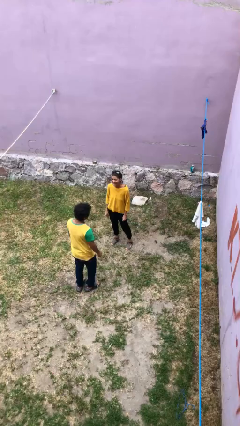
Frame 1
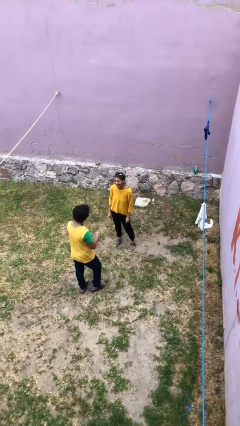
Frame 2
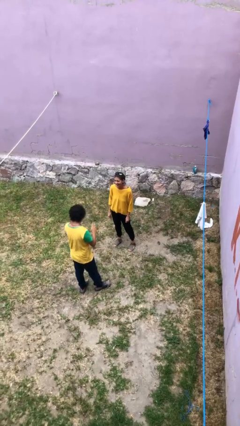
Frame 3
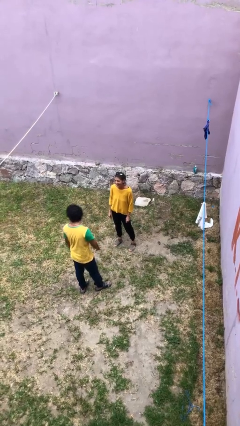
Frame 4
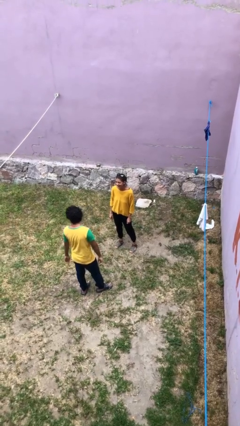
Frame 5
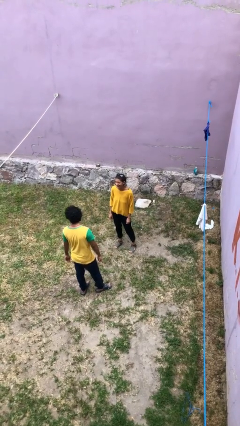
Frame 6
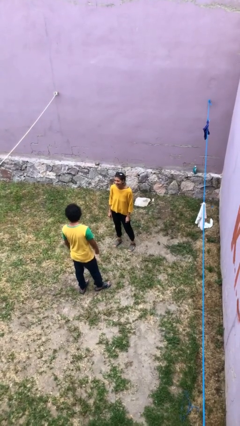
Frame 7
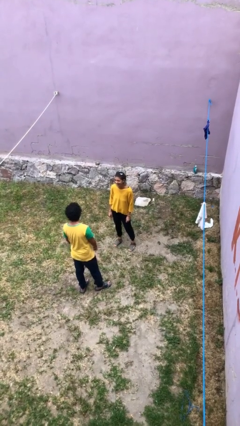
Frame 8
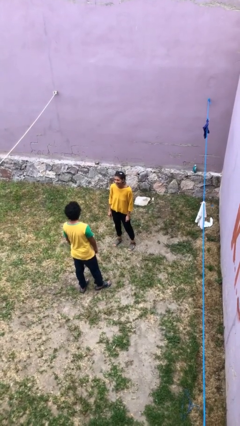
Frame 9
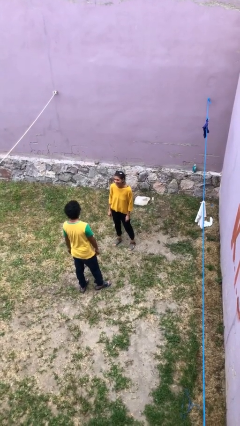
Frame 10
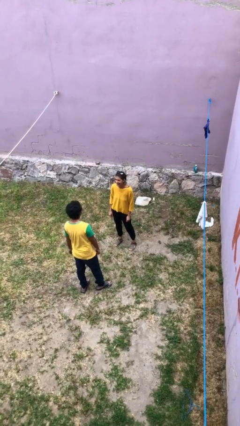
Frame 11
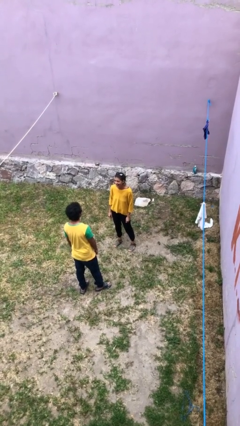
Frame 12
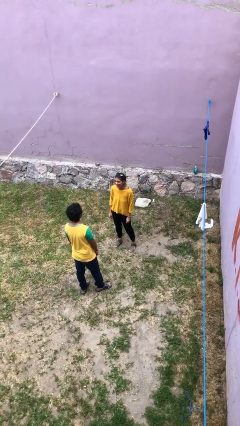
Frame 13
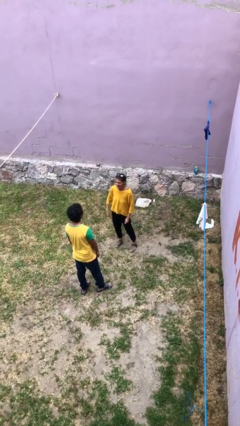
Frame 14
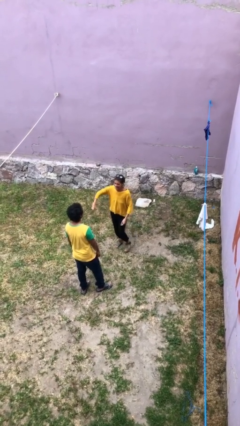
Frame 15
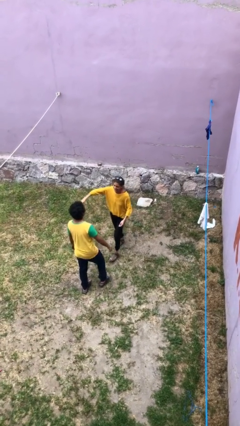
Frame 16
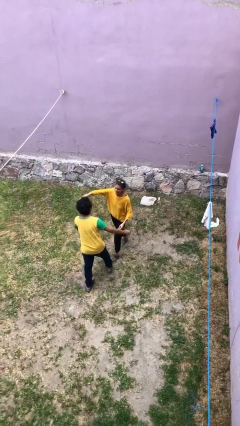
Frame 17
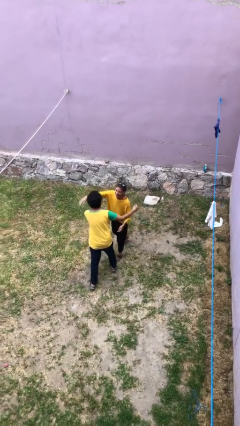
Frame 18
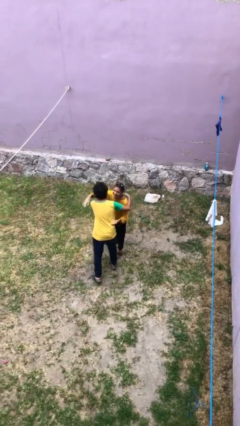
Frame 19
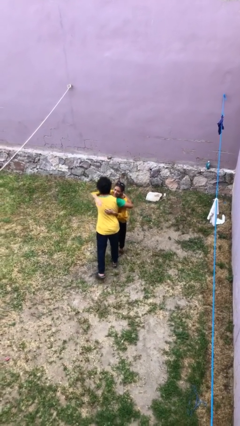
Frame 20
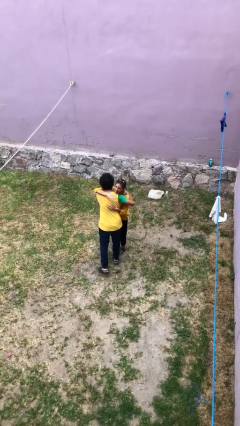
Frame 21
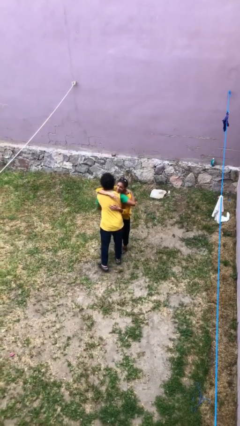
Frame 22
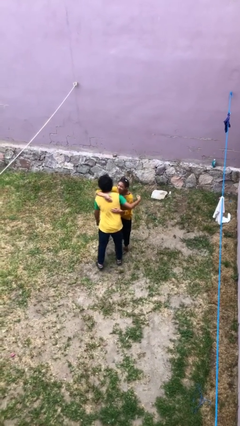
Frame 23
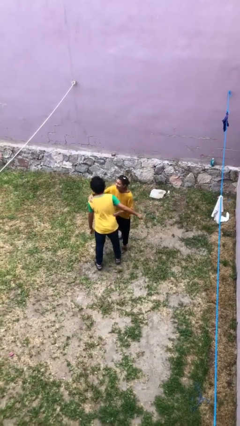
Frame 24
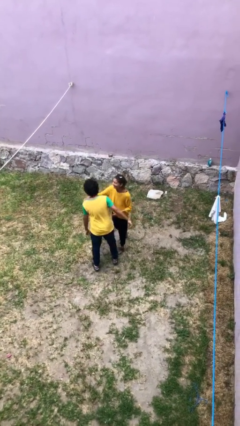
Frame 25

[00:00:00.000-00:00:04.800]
person embraces person

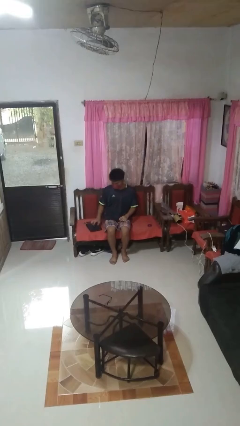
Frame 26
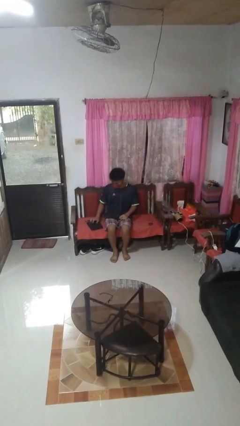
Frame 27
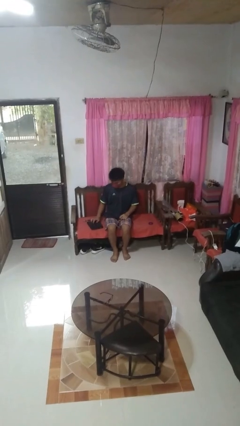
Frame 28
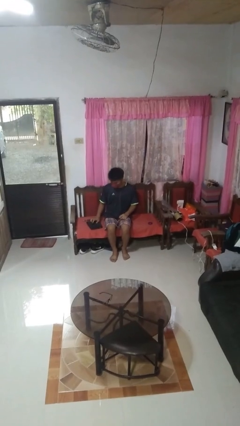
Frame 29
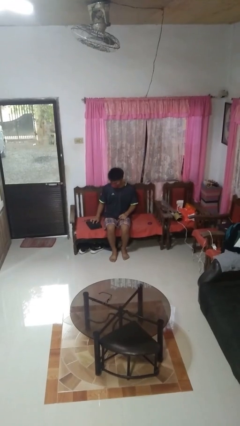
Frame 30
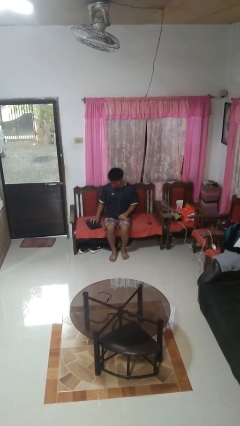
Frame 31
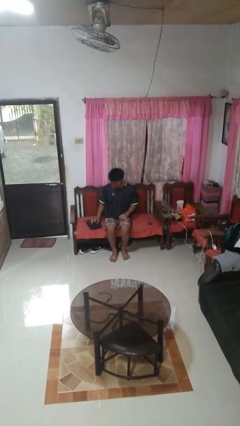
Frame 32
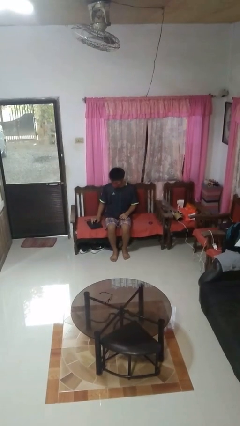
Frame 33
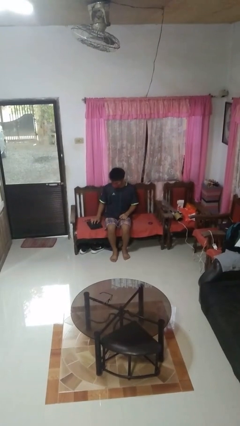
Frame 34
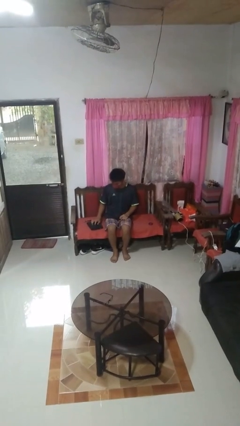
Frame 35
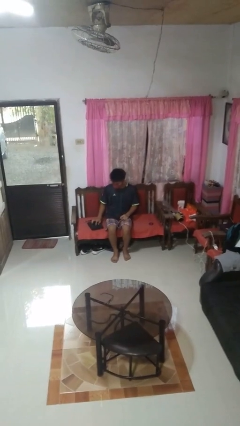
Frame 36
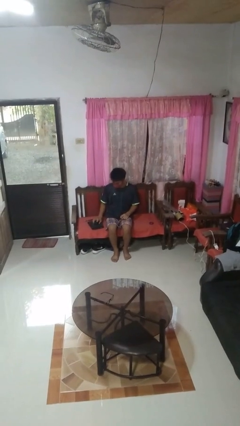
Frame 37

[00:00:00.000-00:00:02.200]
person taps object with finger

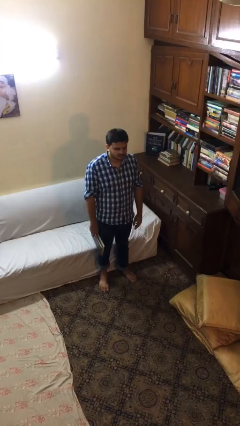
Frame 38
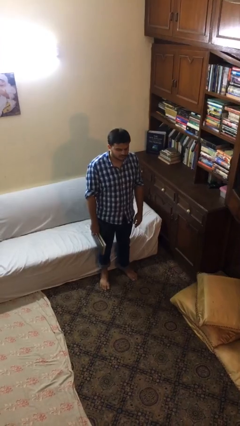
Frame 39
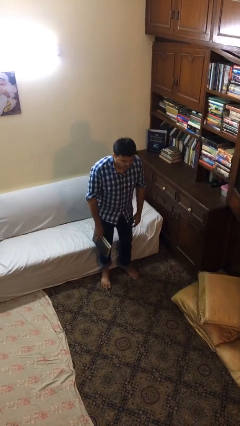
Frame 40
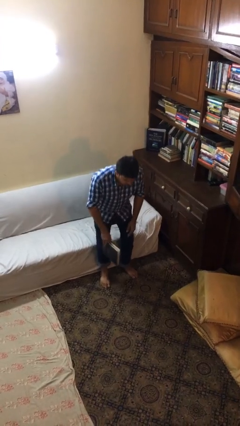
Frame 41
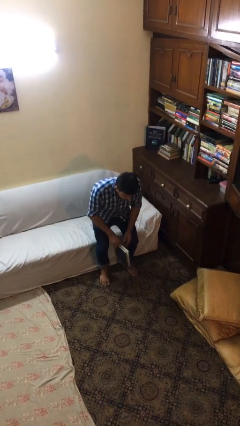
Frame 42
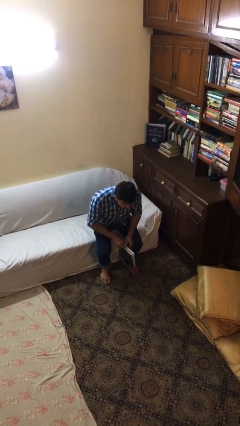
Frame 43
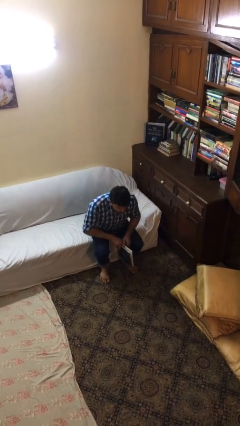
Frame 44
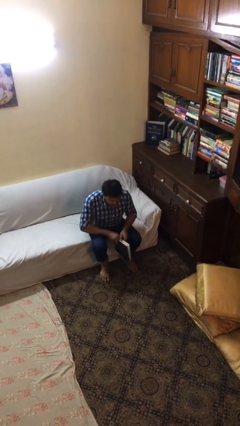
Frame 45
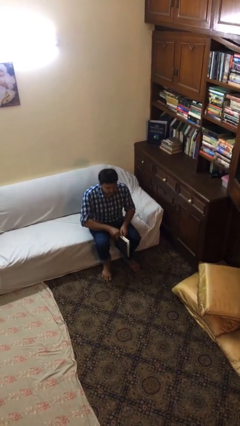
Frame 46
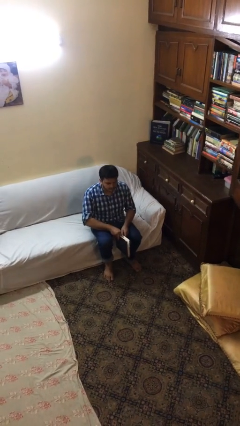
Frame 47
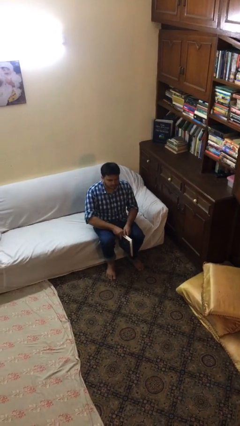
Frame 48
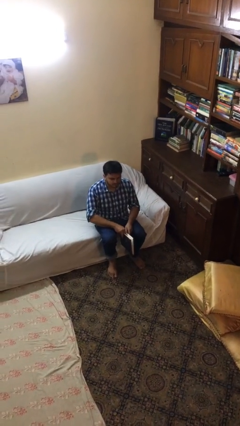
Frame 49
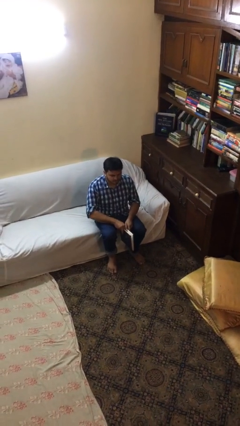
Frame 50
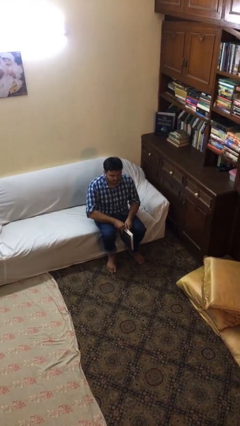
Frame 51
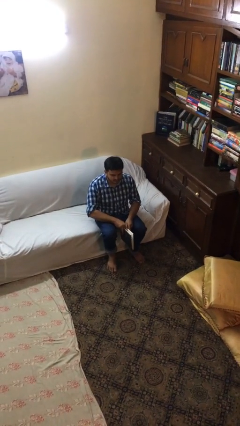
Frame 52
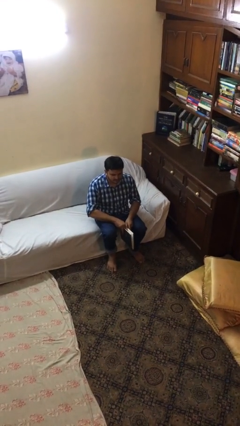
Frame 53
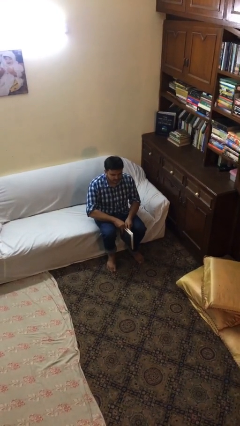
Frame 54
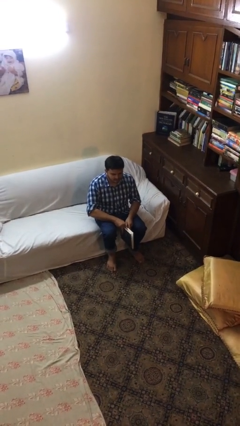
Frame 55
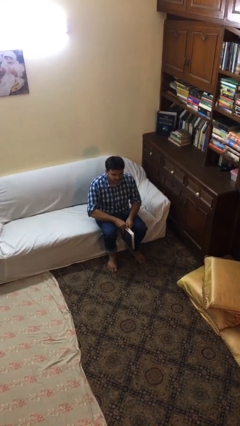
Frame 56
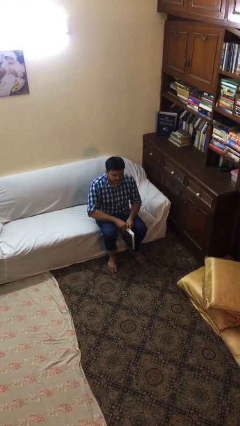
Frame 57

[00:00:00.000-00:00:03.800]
person sits down

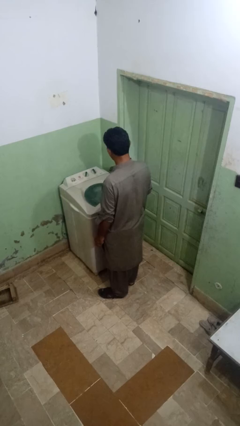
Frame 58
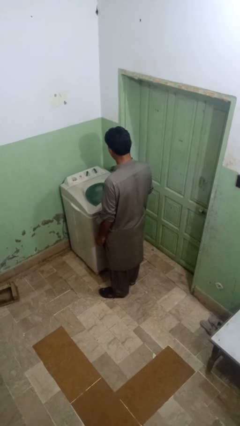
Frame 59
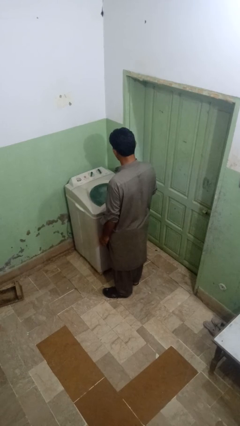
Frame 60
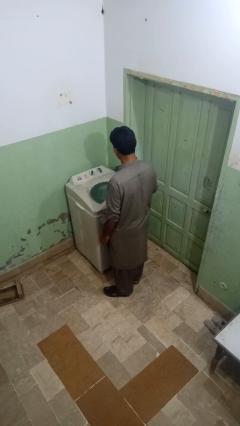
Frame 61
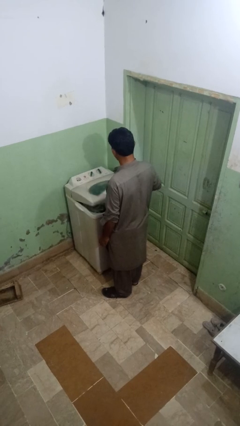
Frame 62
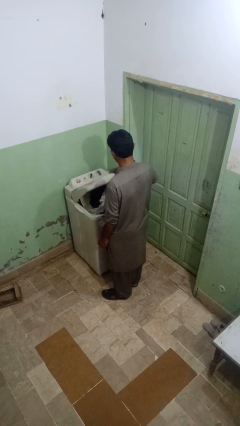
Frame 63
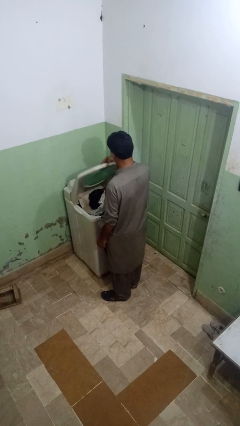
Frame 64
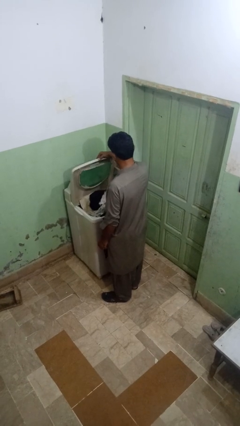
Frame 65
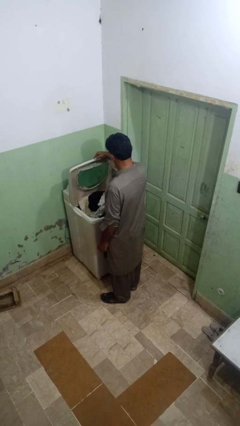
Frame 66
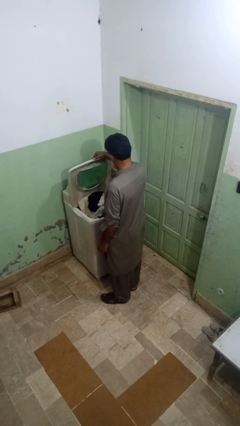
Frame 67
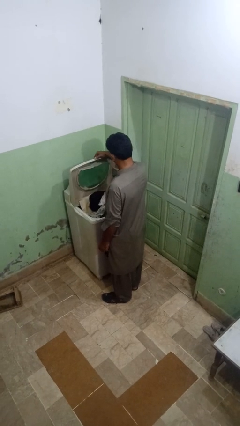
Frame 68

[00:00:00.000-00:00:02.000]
person opens clothes washer

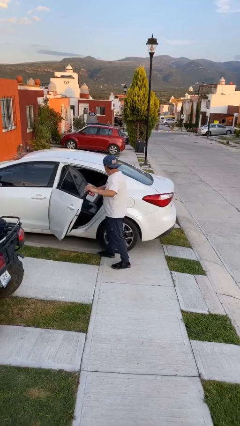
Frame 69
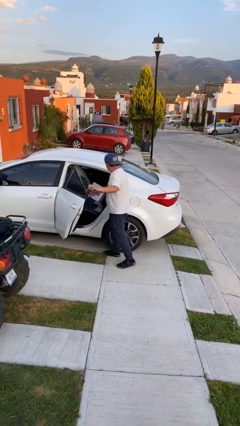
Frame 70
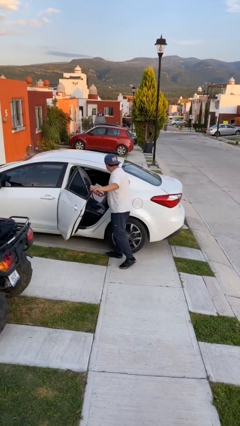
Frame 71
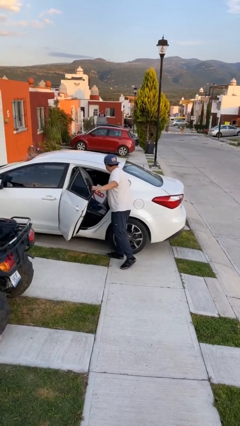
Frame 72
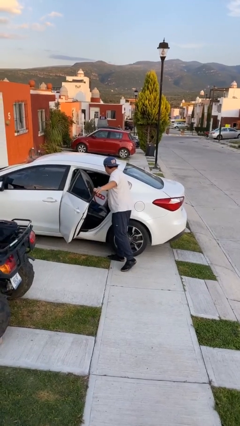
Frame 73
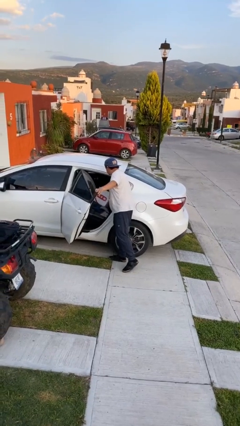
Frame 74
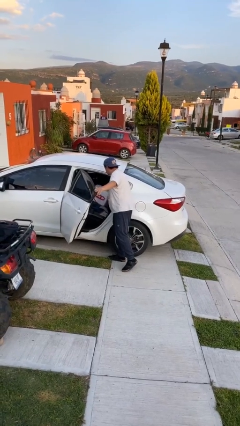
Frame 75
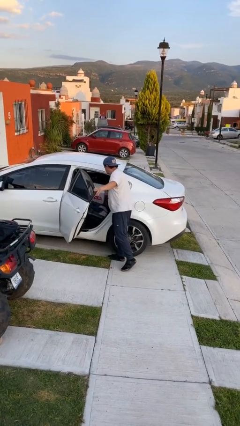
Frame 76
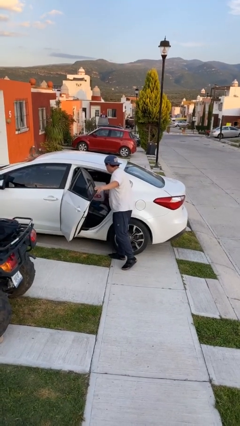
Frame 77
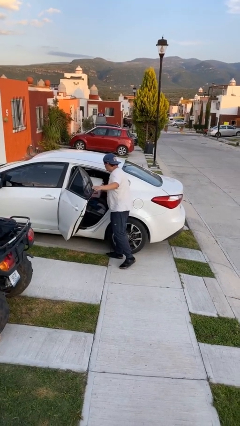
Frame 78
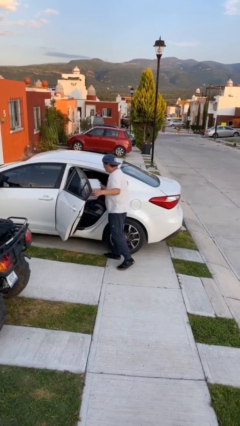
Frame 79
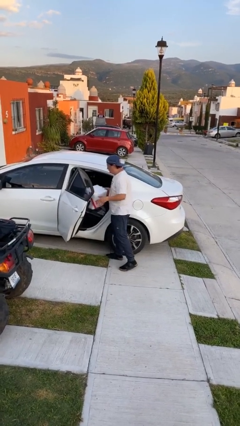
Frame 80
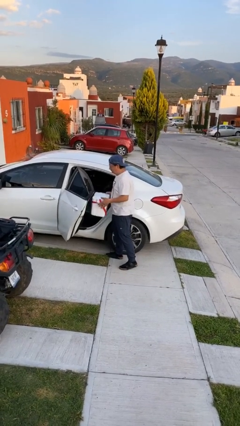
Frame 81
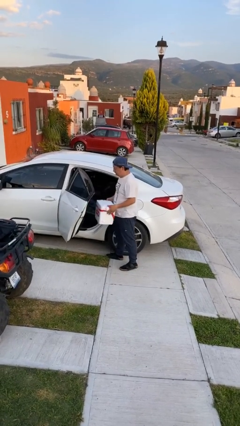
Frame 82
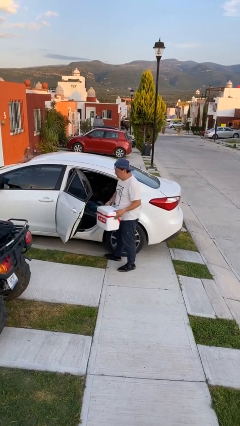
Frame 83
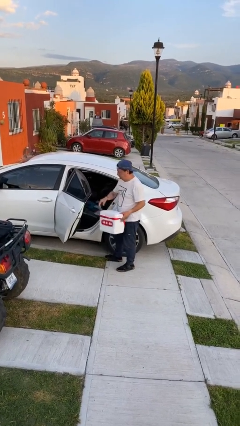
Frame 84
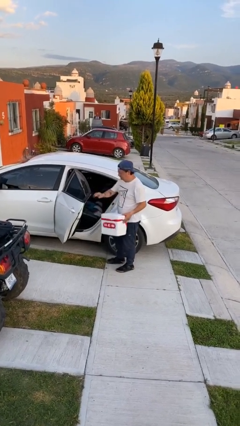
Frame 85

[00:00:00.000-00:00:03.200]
person unloads car

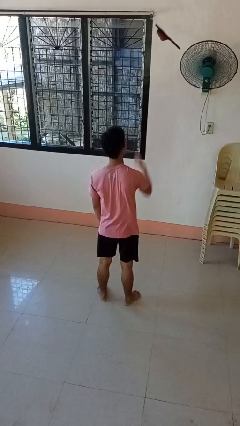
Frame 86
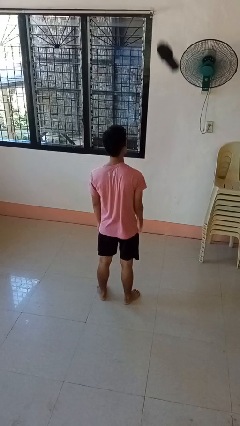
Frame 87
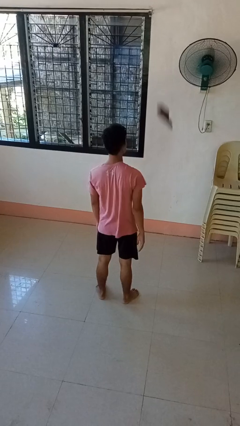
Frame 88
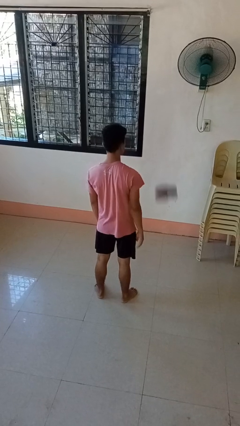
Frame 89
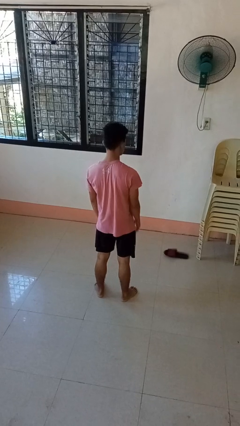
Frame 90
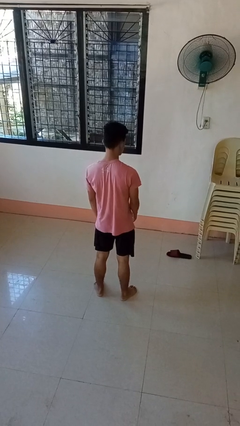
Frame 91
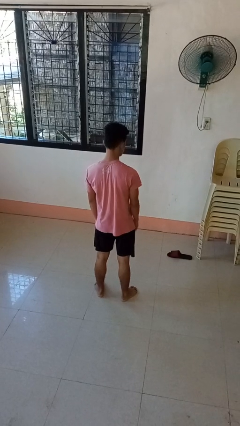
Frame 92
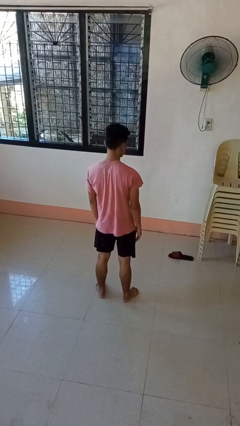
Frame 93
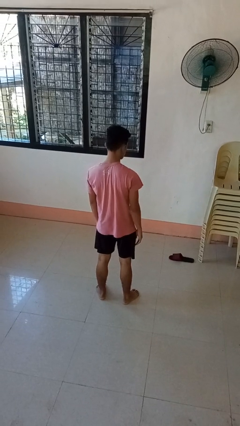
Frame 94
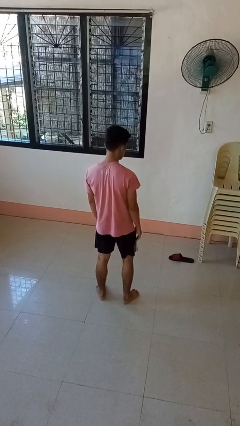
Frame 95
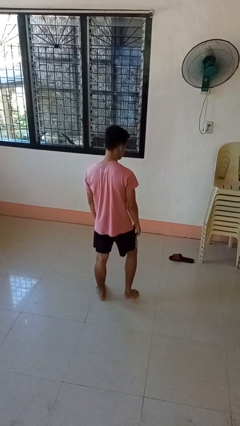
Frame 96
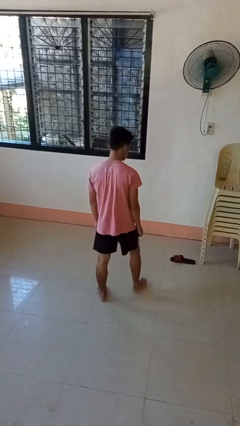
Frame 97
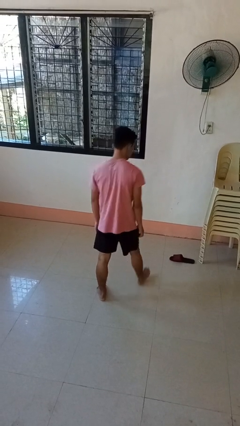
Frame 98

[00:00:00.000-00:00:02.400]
person throws object into air
